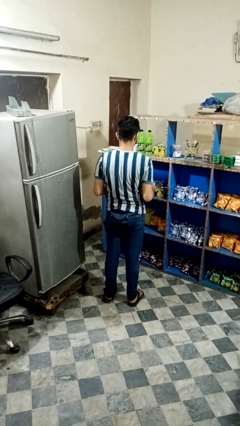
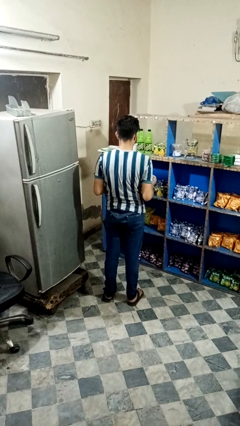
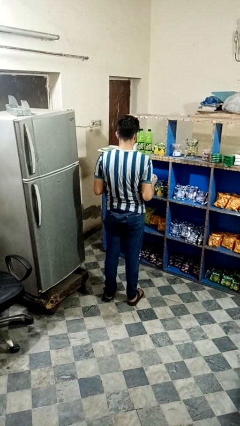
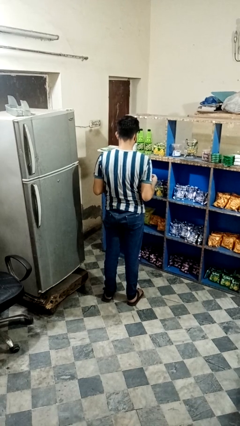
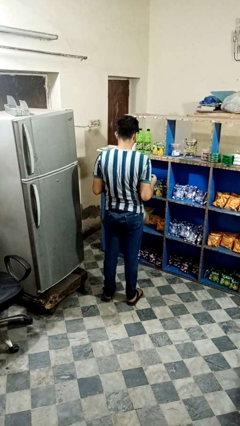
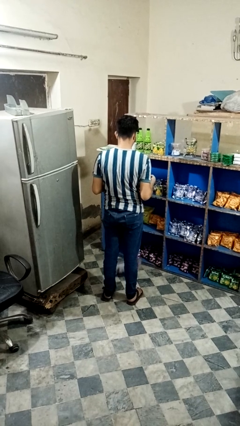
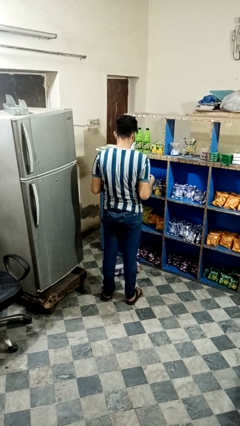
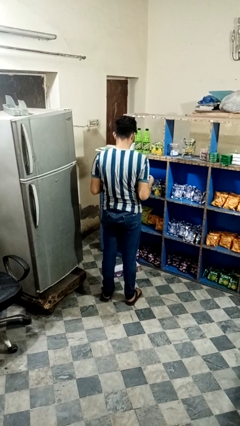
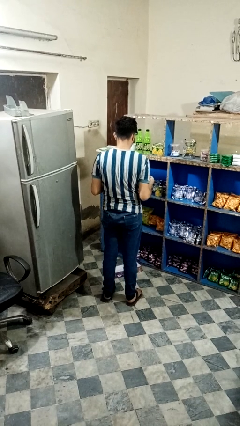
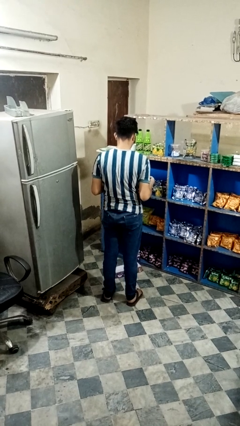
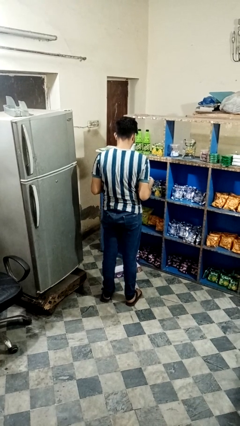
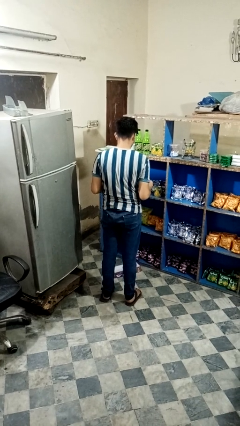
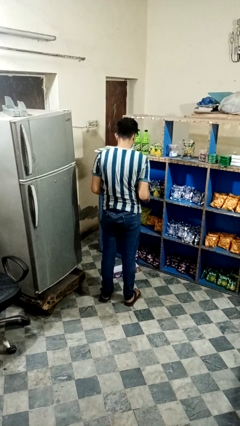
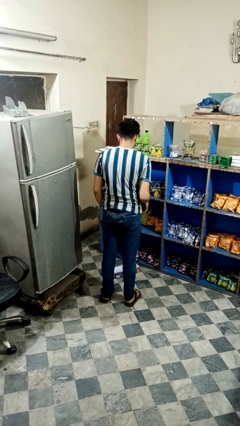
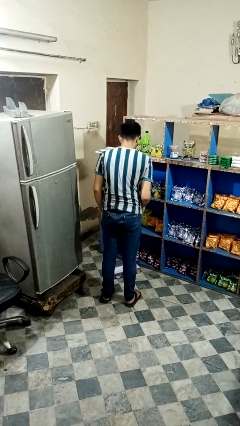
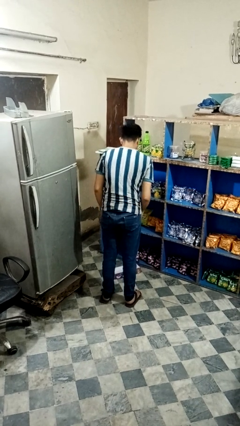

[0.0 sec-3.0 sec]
person drops object

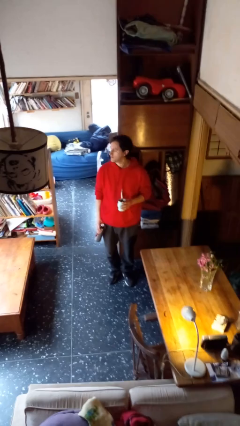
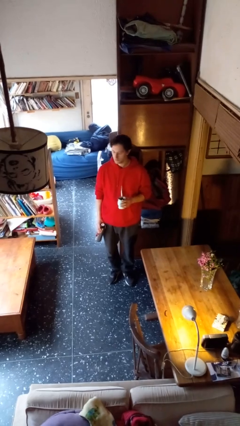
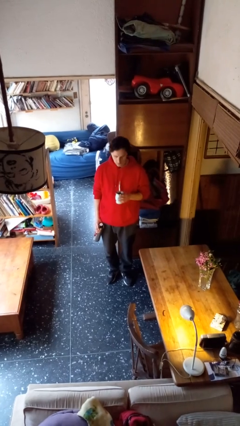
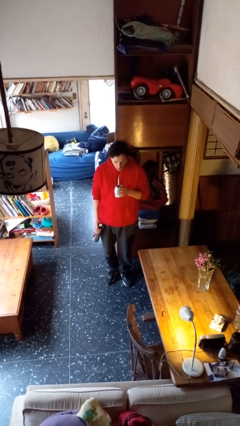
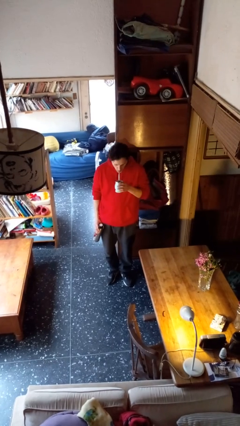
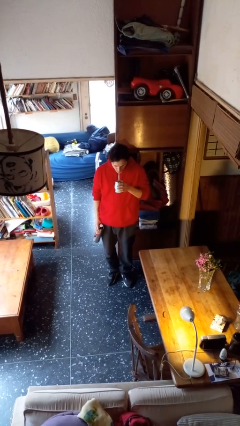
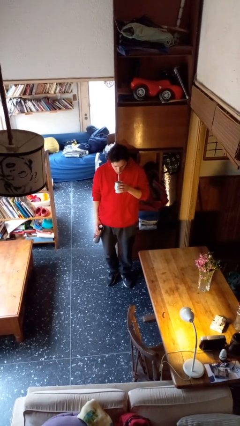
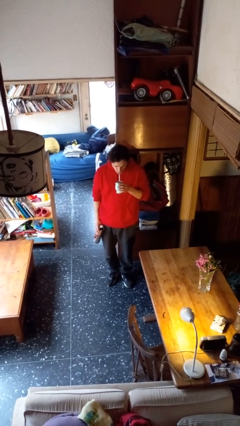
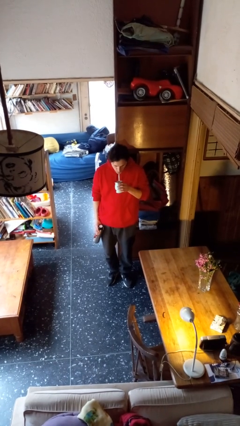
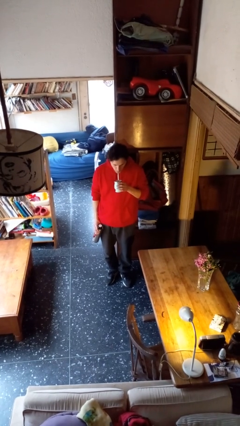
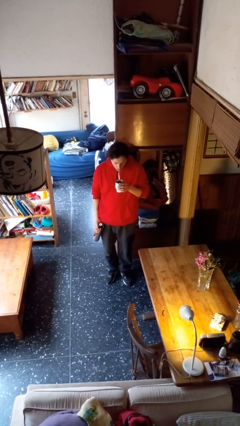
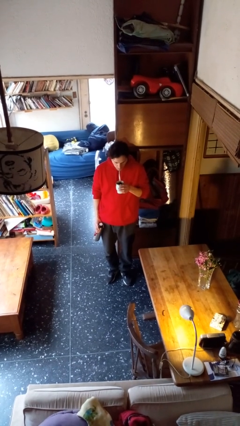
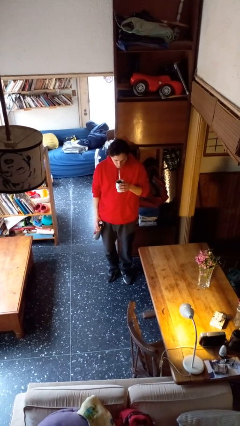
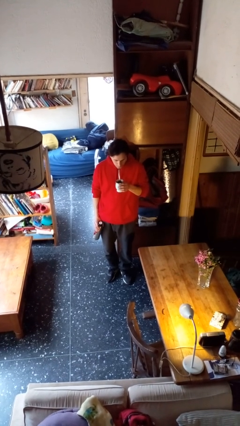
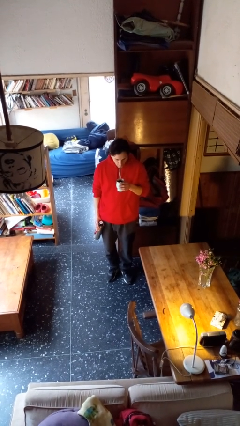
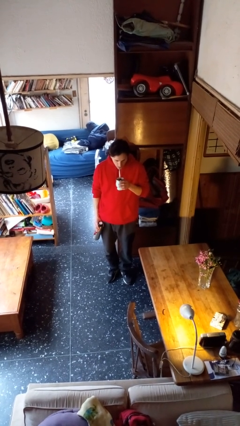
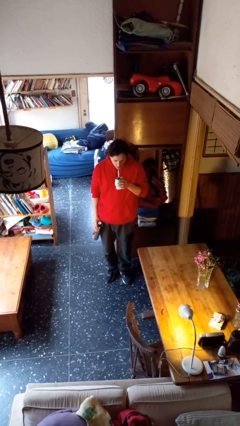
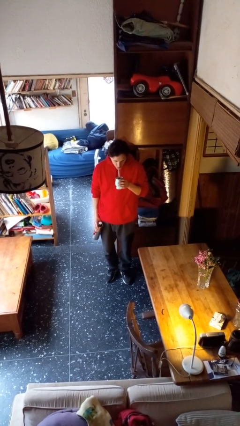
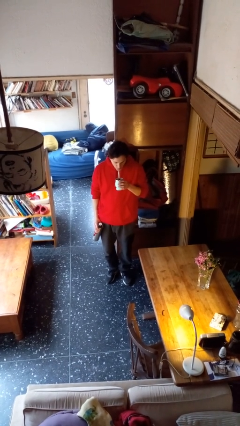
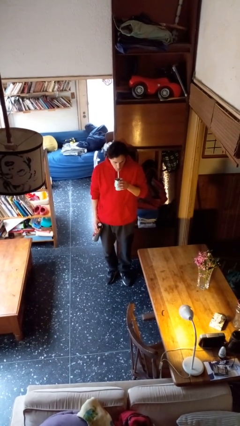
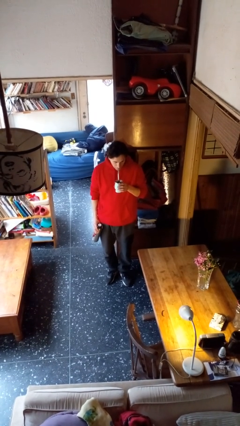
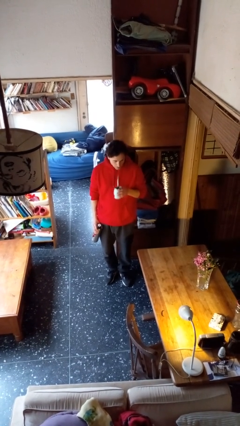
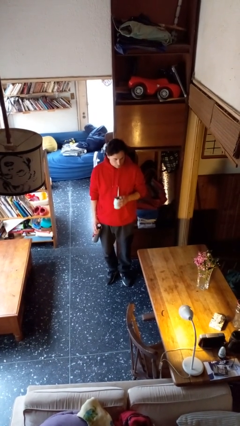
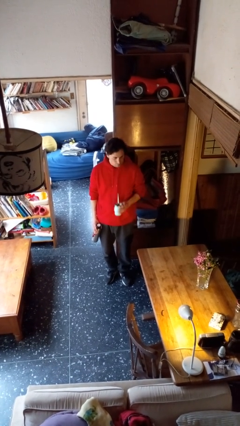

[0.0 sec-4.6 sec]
person drinks from straw

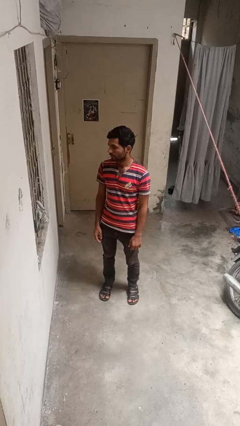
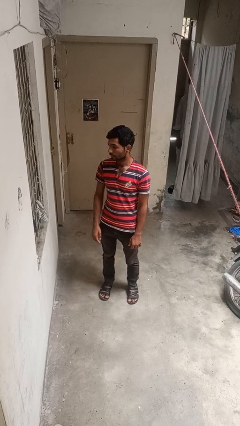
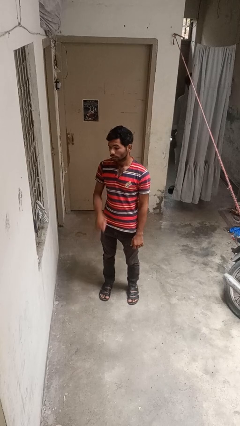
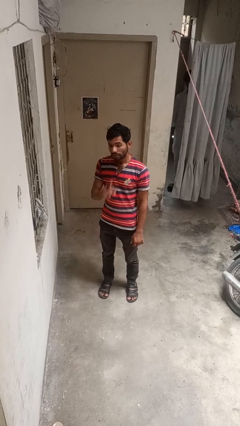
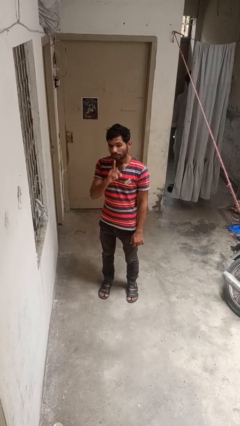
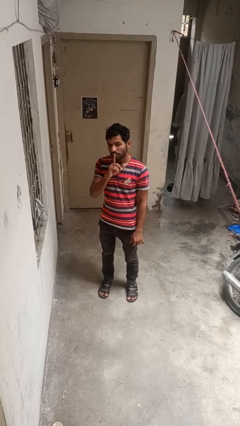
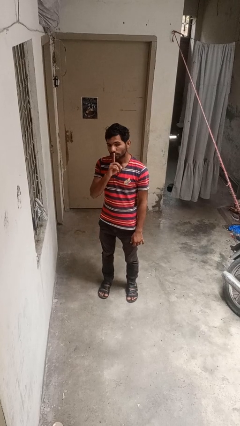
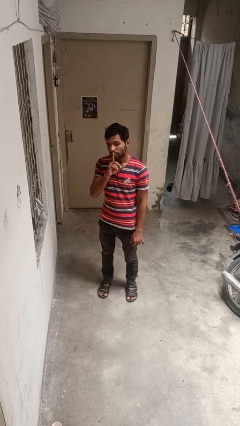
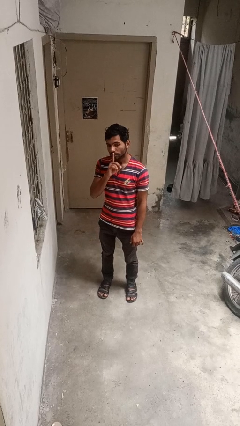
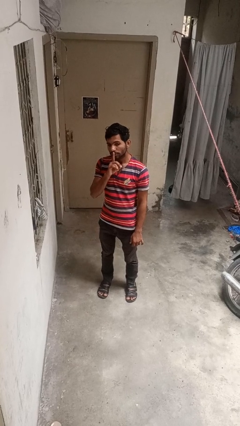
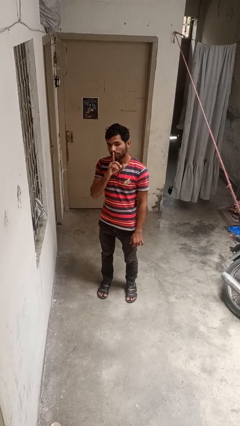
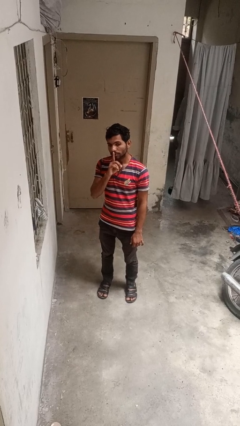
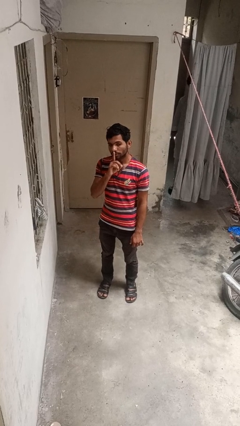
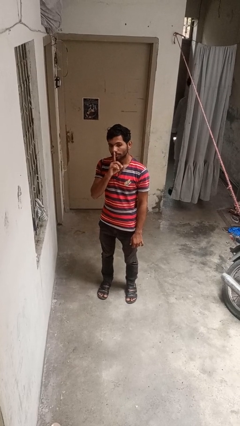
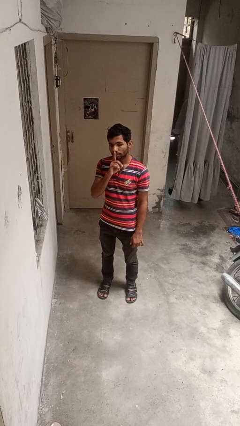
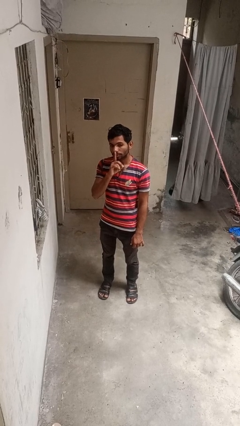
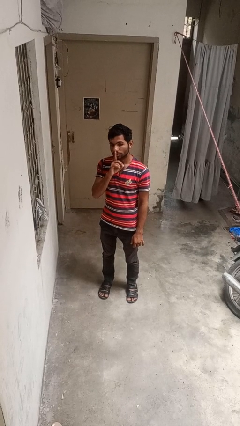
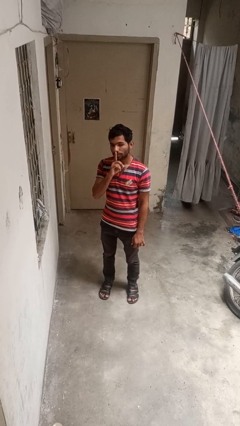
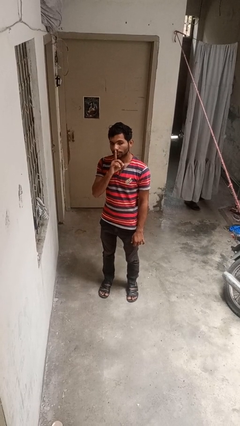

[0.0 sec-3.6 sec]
person gestures be quiet

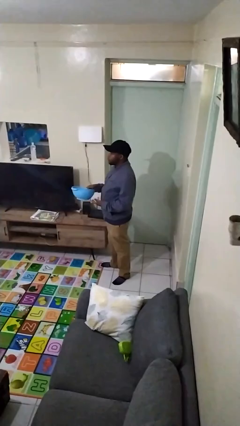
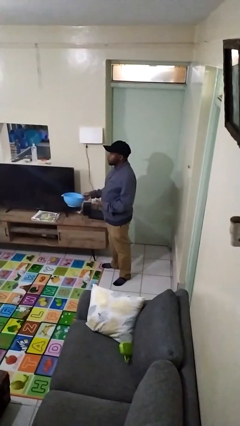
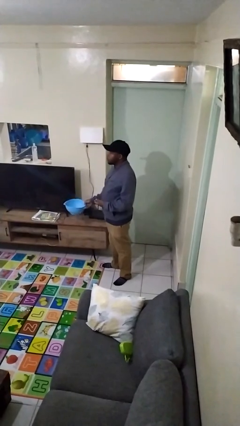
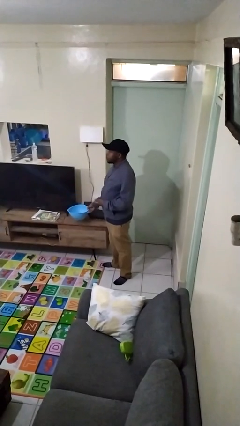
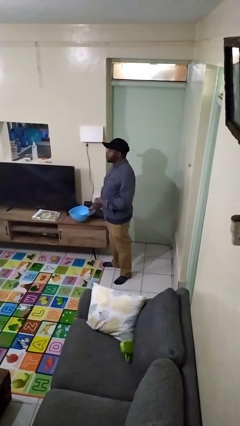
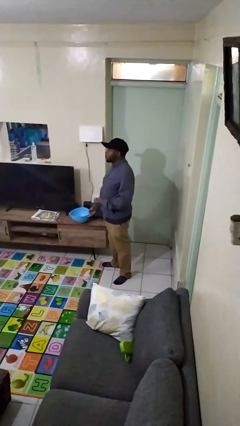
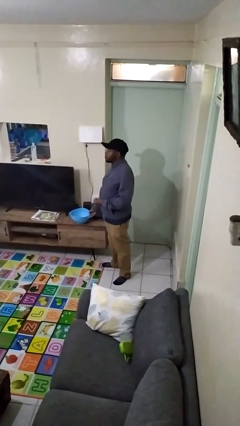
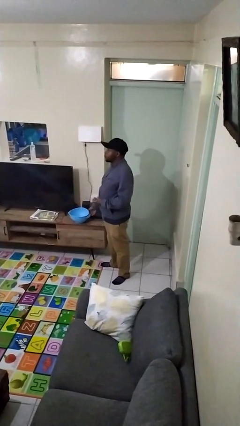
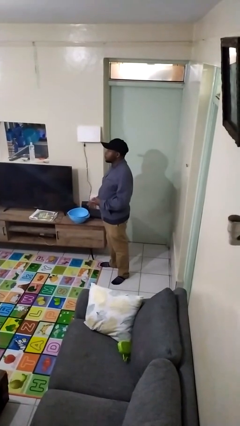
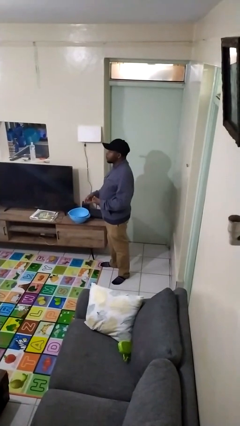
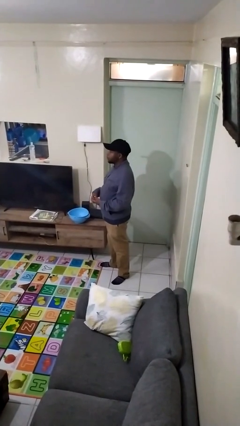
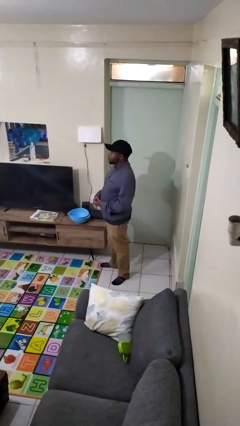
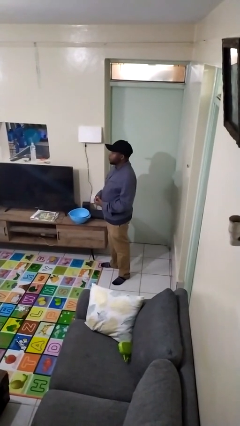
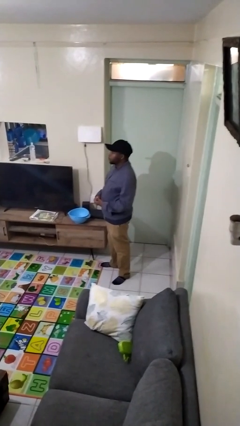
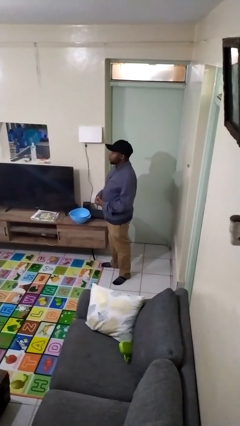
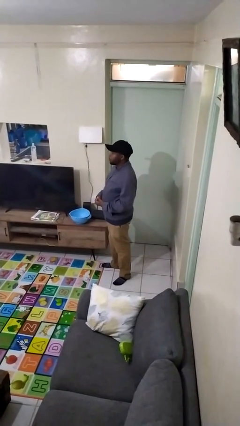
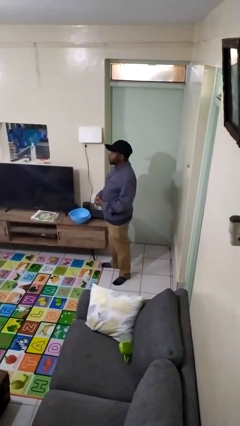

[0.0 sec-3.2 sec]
person puts down object on countertop

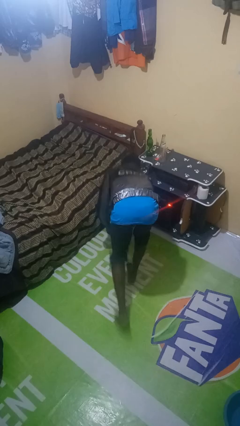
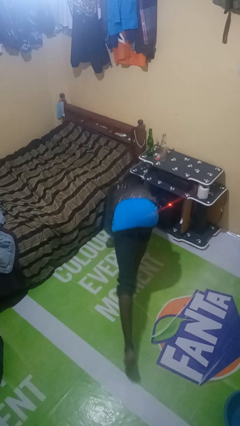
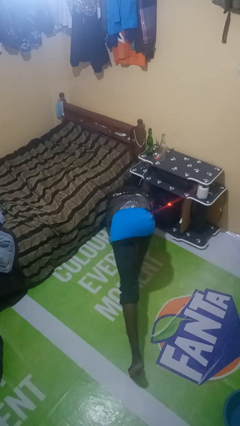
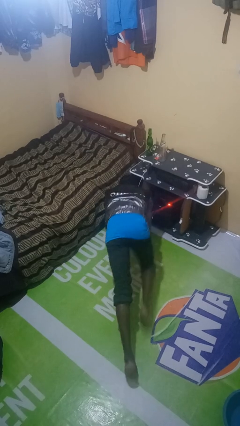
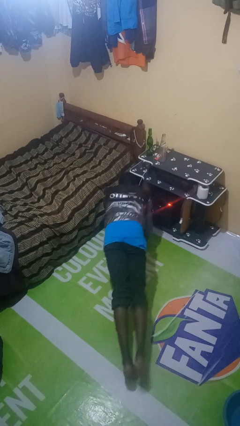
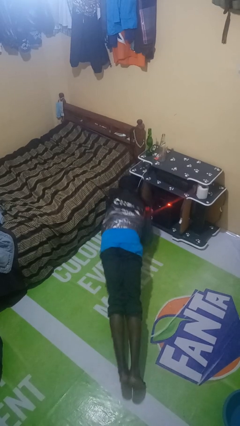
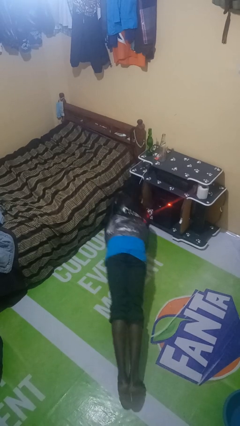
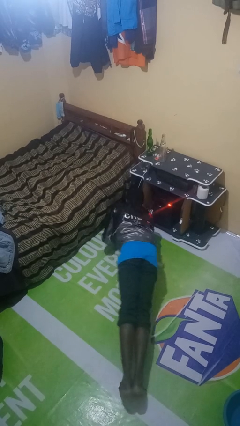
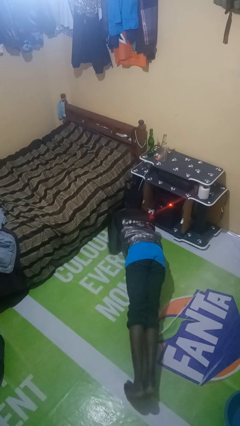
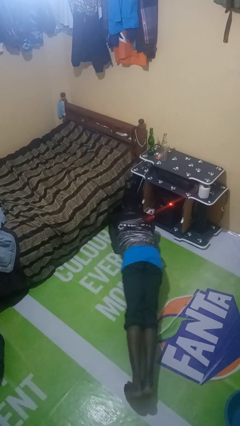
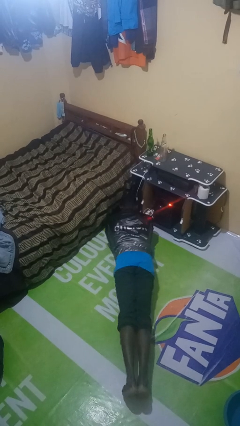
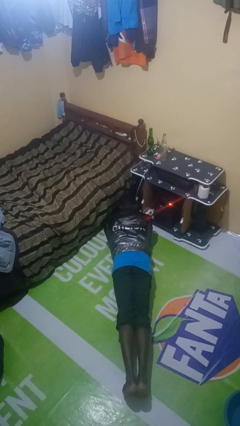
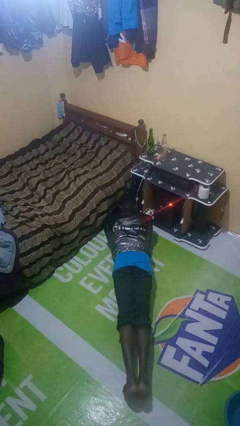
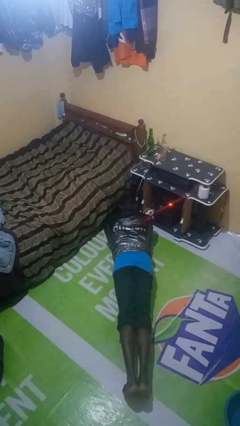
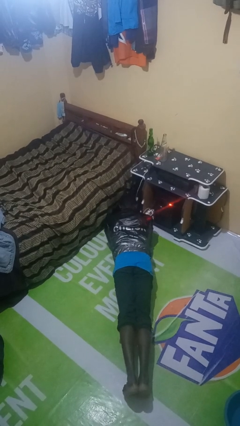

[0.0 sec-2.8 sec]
person exercises with plank
